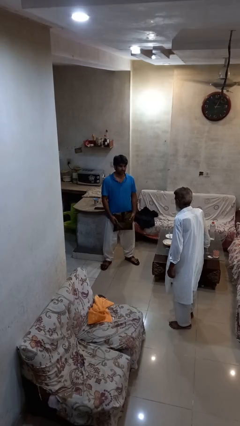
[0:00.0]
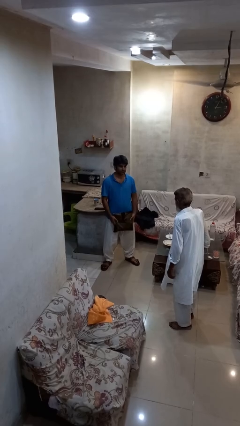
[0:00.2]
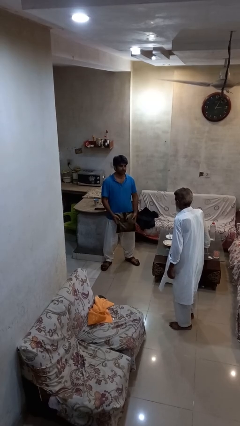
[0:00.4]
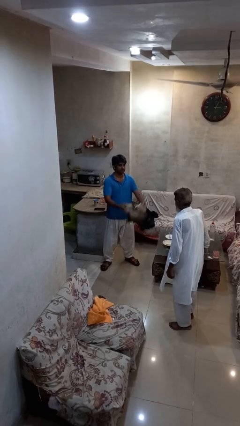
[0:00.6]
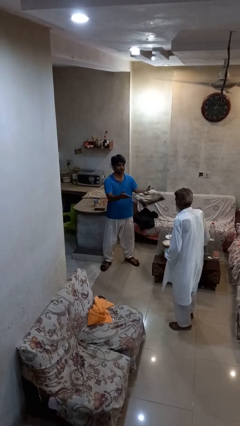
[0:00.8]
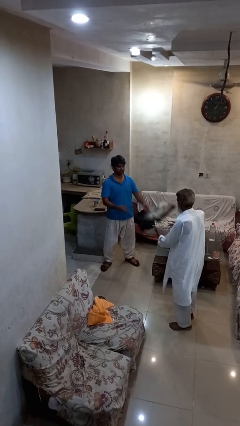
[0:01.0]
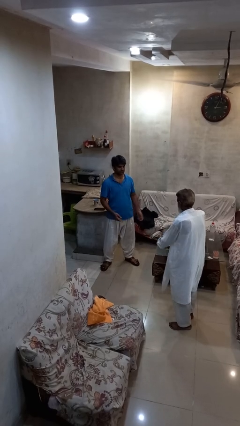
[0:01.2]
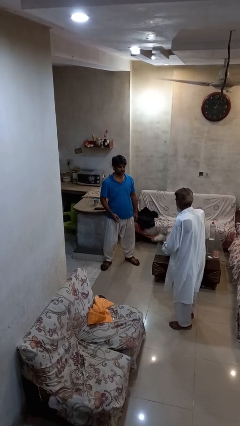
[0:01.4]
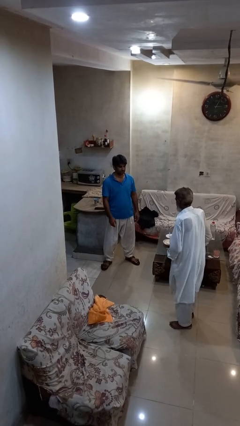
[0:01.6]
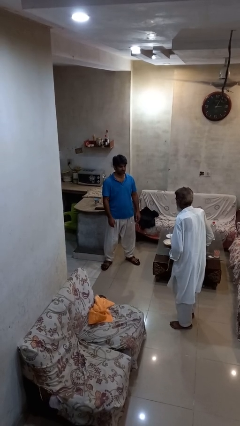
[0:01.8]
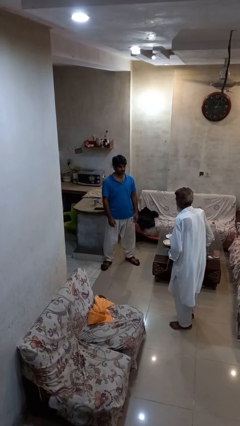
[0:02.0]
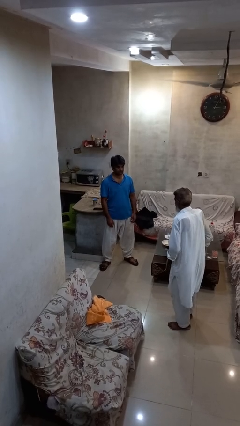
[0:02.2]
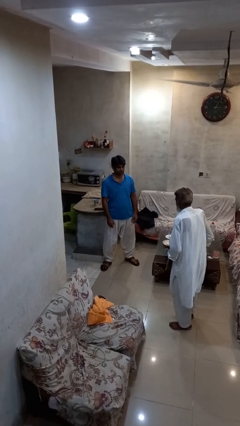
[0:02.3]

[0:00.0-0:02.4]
person throws object to person

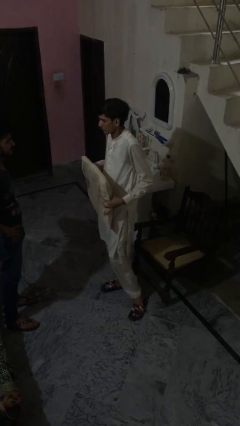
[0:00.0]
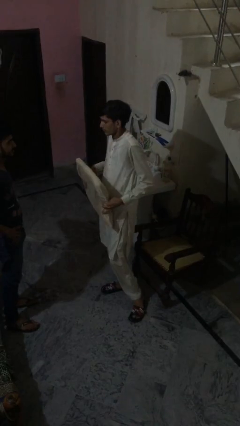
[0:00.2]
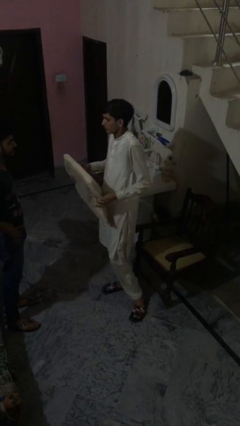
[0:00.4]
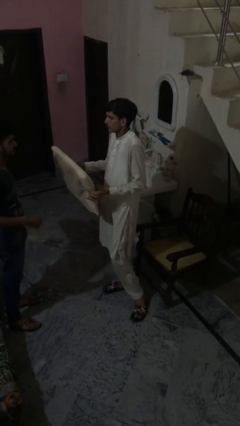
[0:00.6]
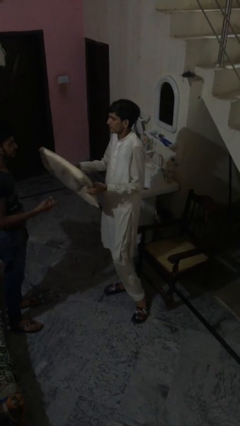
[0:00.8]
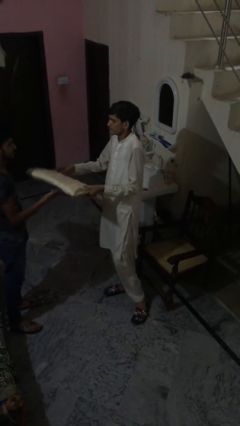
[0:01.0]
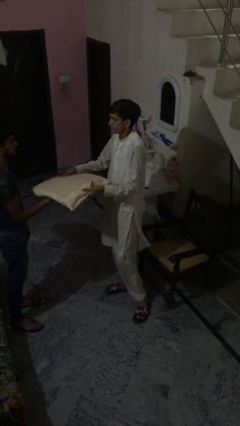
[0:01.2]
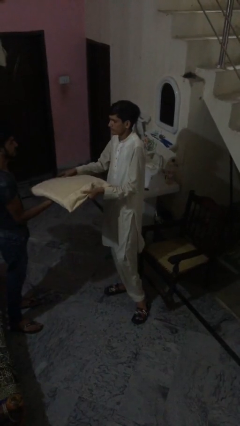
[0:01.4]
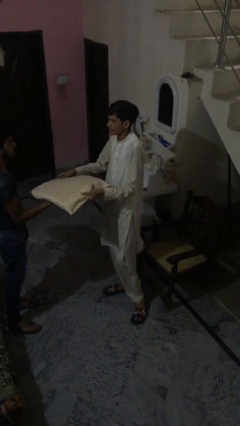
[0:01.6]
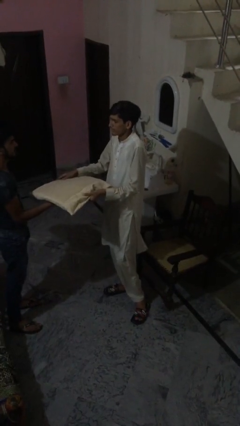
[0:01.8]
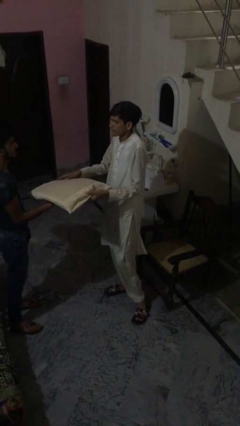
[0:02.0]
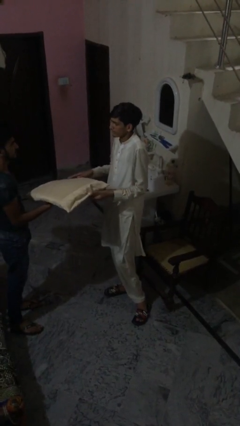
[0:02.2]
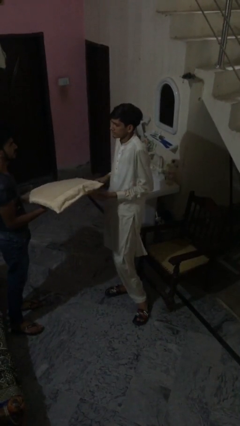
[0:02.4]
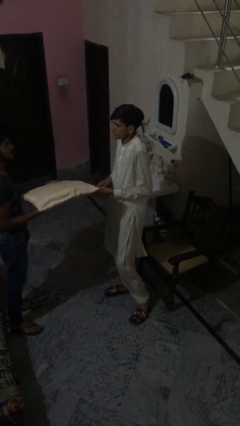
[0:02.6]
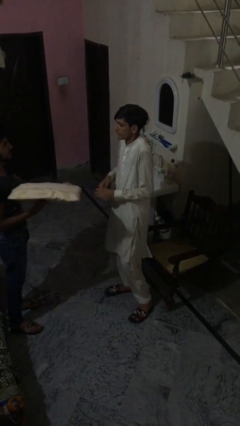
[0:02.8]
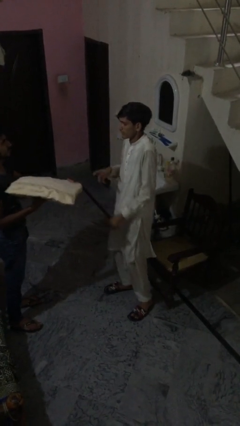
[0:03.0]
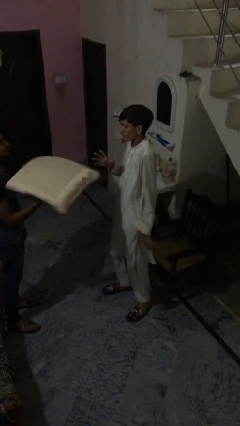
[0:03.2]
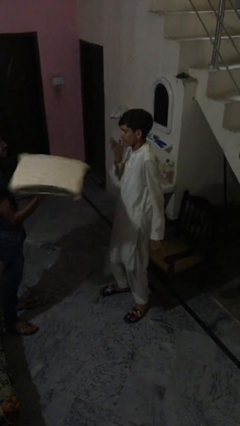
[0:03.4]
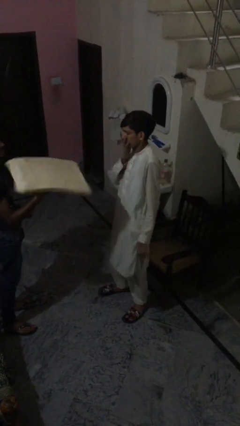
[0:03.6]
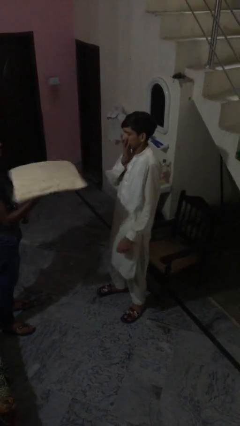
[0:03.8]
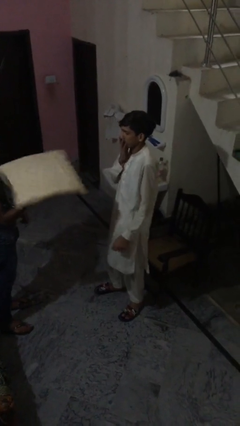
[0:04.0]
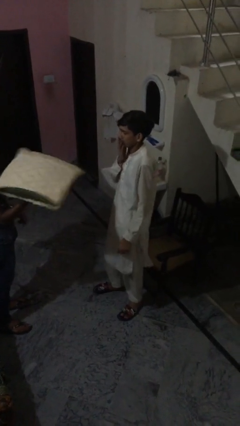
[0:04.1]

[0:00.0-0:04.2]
person transfers object to person

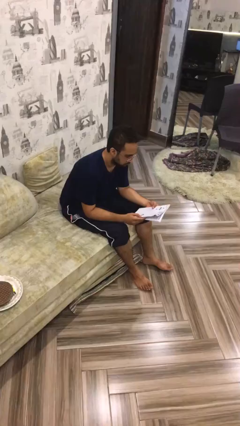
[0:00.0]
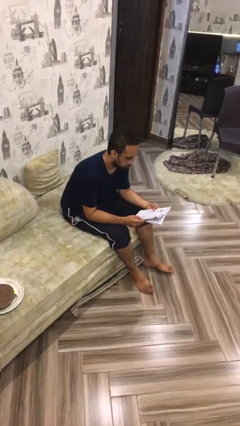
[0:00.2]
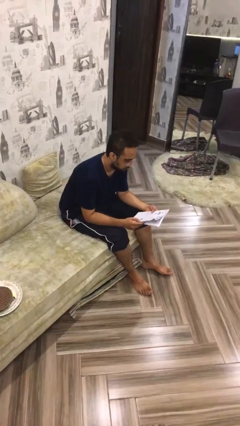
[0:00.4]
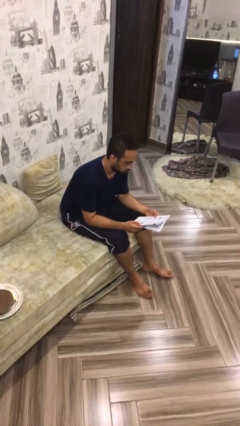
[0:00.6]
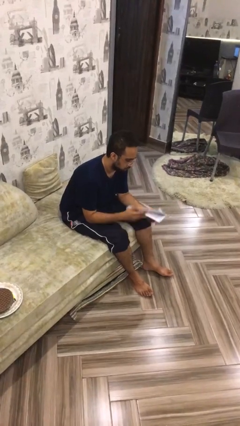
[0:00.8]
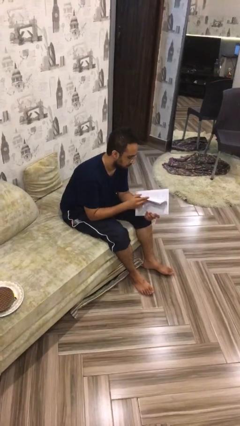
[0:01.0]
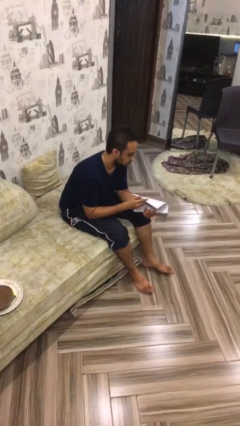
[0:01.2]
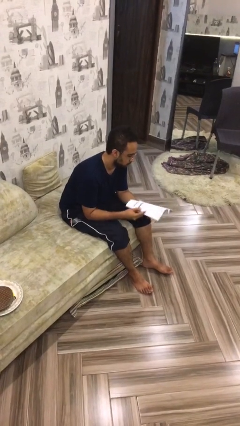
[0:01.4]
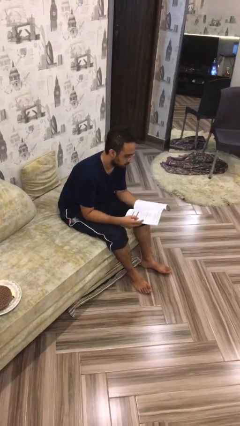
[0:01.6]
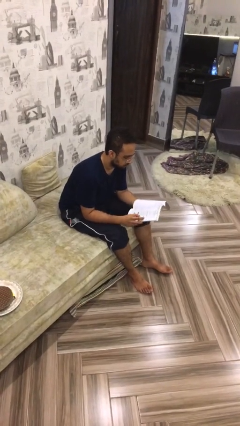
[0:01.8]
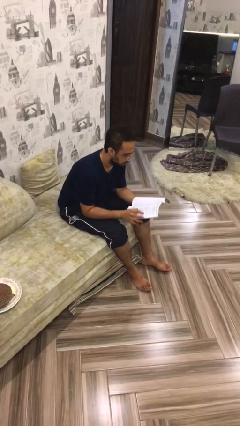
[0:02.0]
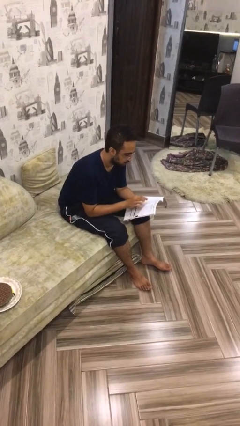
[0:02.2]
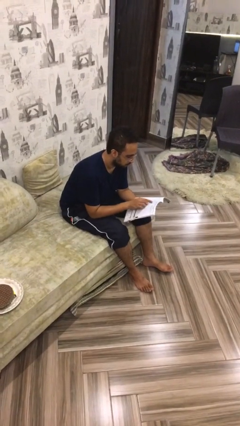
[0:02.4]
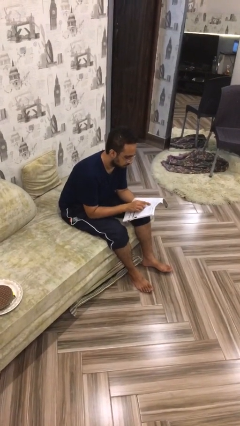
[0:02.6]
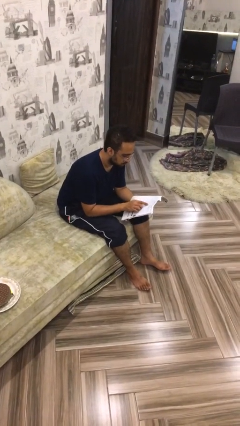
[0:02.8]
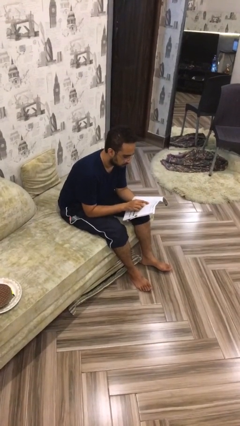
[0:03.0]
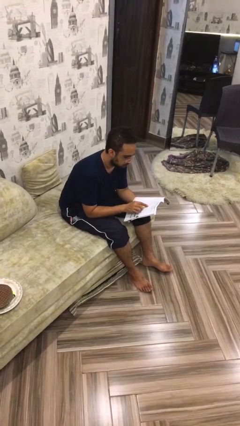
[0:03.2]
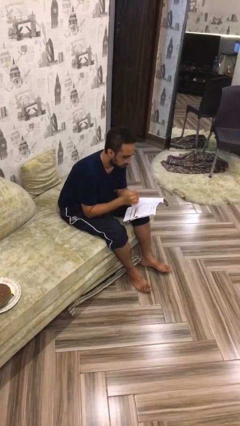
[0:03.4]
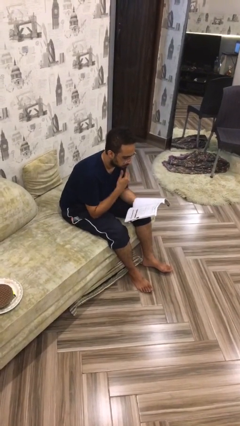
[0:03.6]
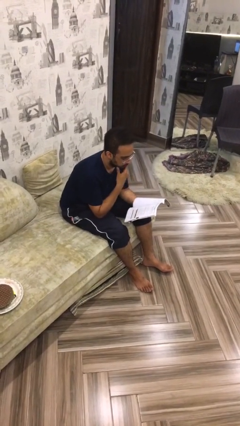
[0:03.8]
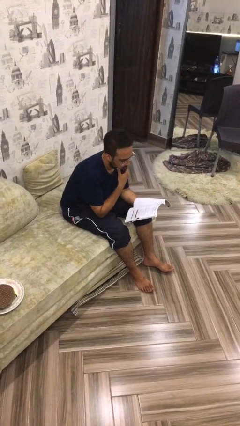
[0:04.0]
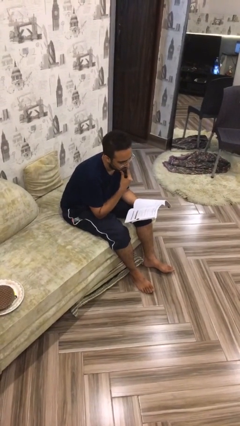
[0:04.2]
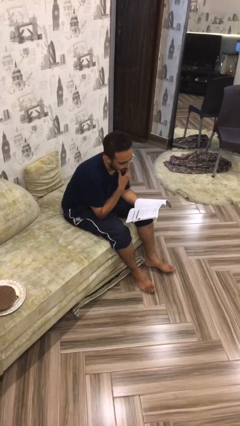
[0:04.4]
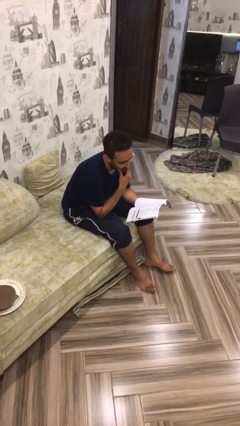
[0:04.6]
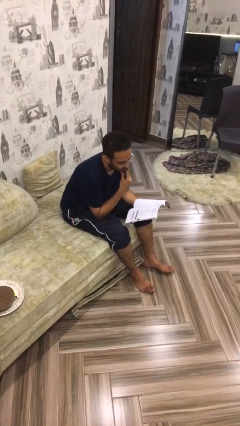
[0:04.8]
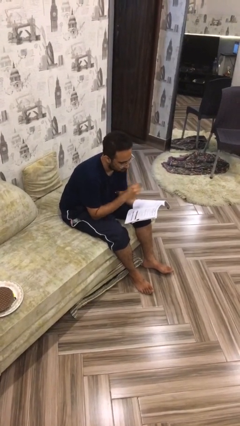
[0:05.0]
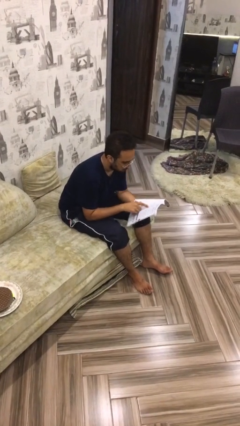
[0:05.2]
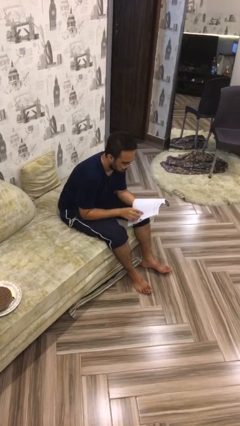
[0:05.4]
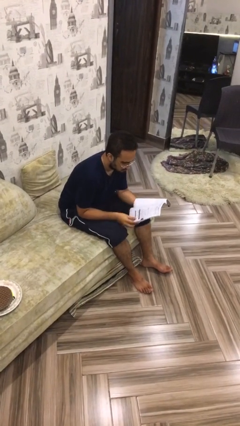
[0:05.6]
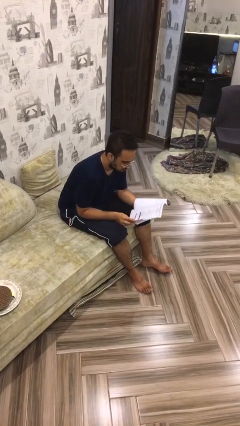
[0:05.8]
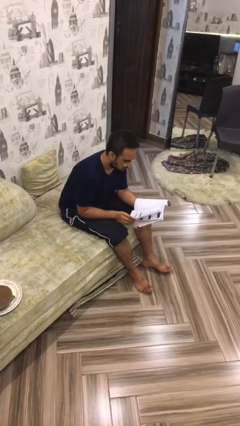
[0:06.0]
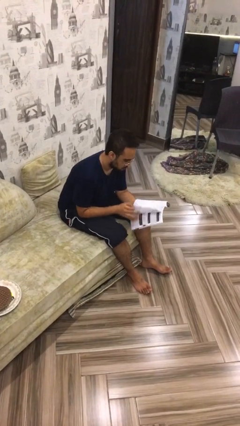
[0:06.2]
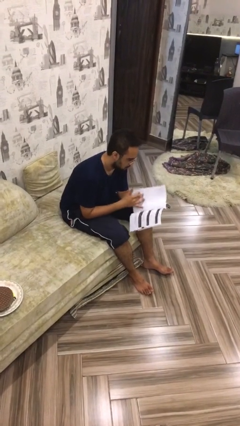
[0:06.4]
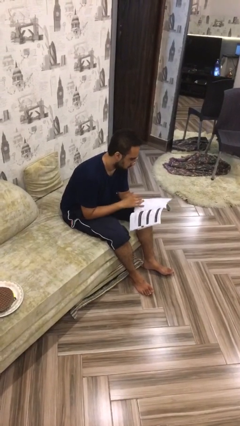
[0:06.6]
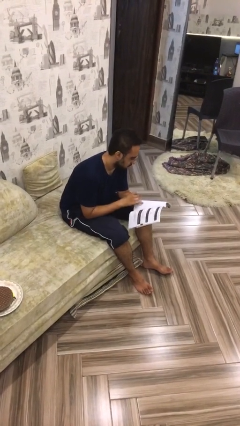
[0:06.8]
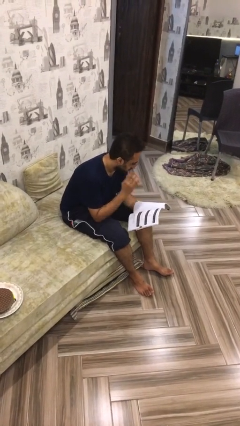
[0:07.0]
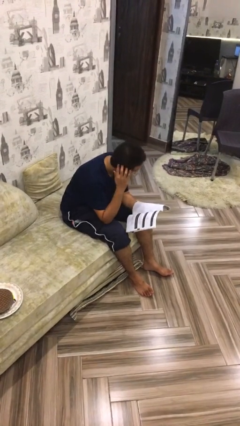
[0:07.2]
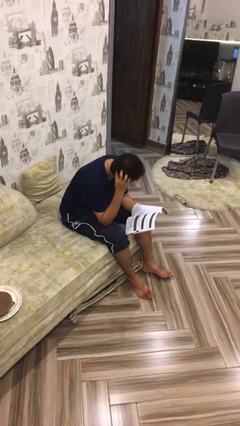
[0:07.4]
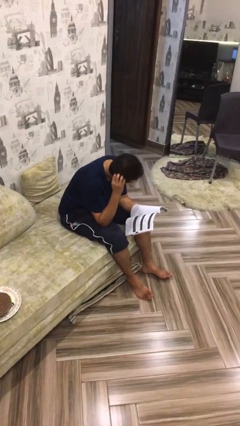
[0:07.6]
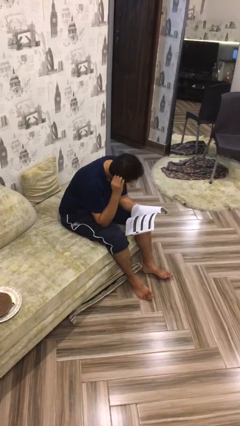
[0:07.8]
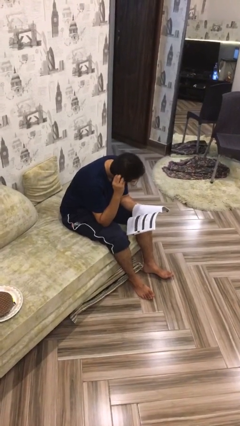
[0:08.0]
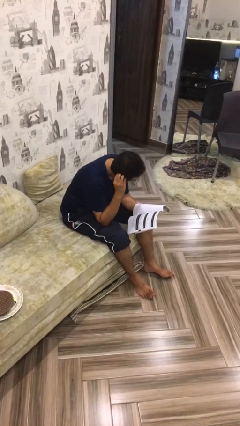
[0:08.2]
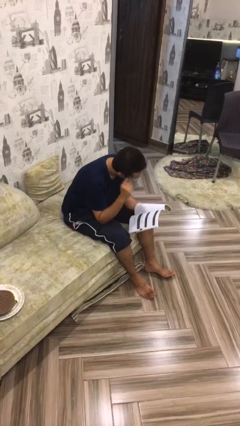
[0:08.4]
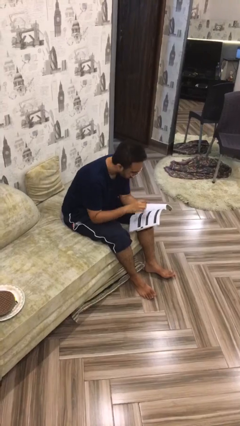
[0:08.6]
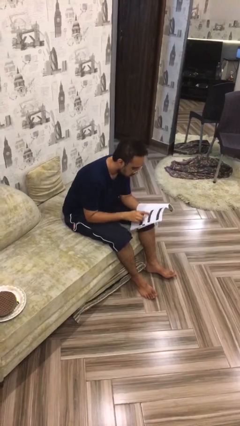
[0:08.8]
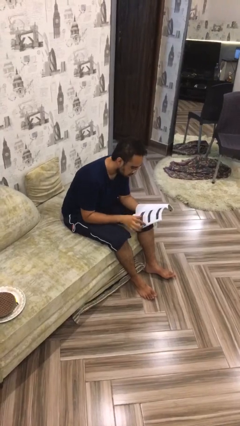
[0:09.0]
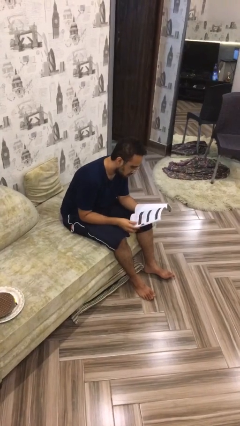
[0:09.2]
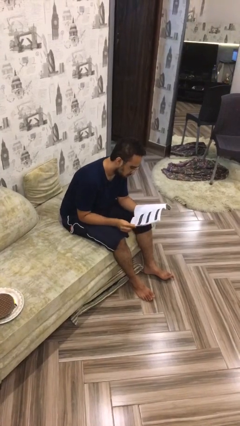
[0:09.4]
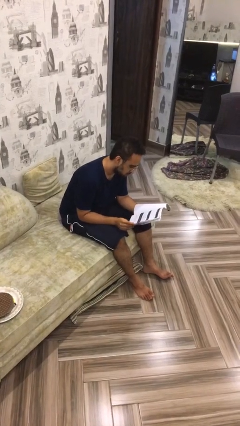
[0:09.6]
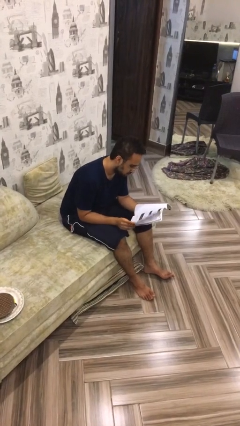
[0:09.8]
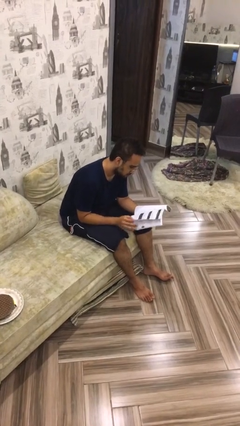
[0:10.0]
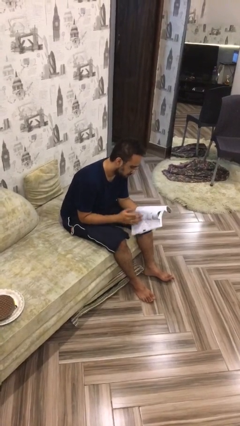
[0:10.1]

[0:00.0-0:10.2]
person reads document

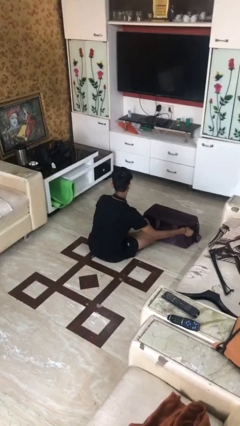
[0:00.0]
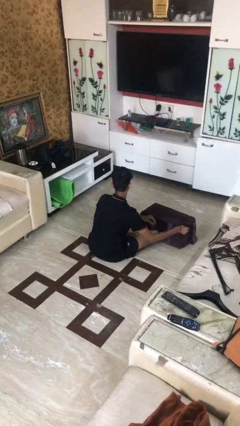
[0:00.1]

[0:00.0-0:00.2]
person closes suitcase

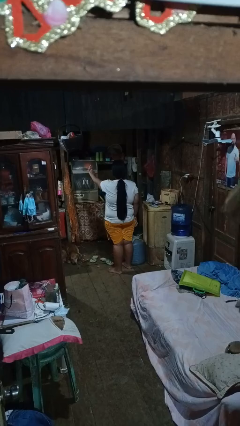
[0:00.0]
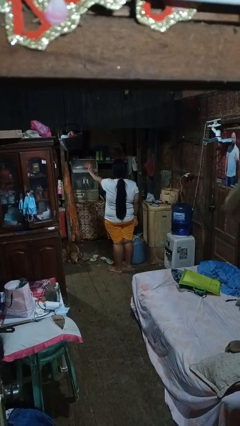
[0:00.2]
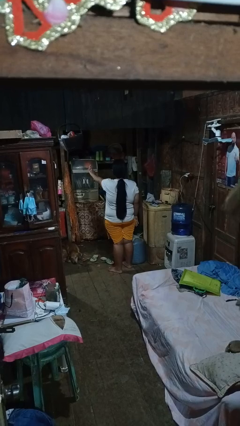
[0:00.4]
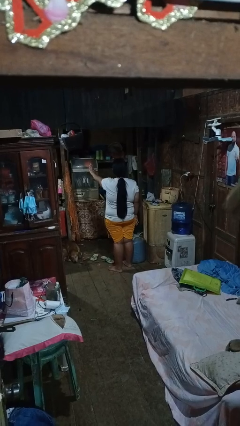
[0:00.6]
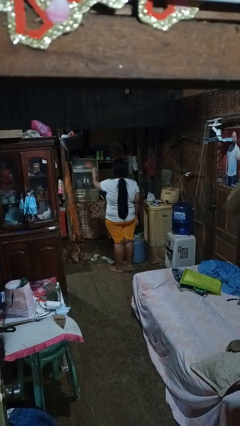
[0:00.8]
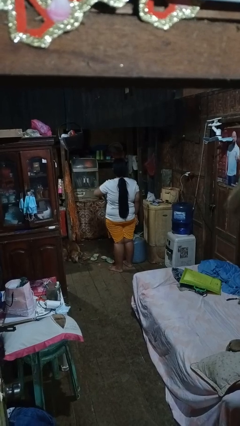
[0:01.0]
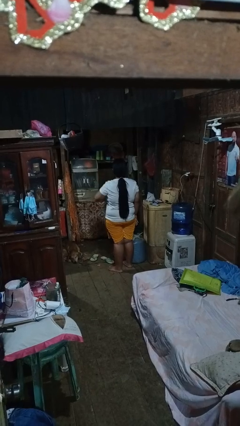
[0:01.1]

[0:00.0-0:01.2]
person gestures stop
